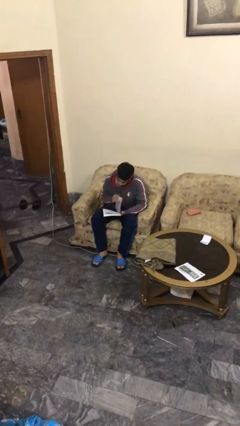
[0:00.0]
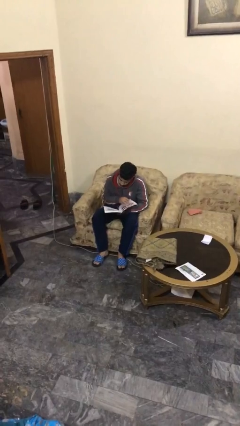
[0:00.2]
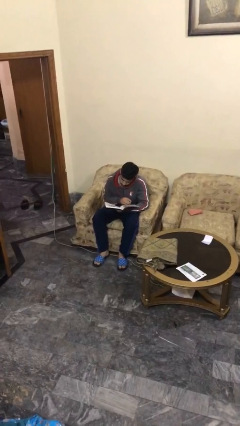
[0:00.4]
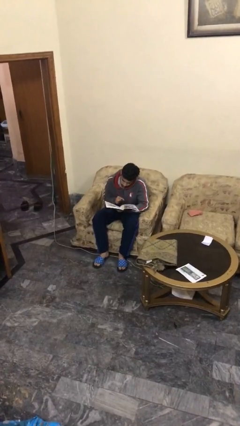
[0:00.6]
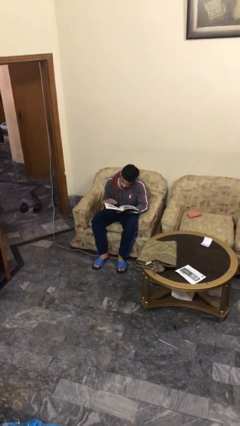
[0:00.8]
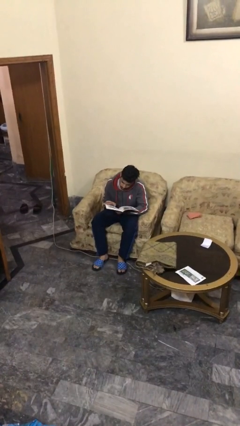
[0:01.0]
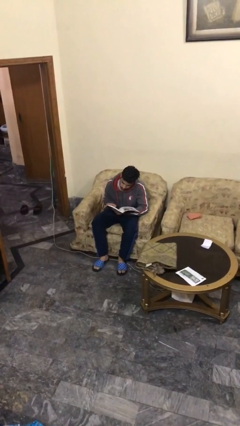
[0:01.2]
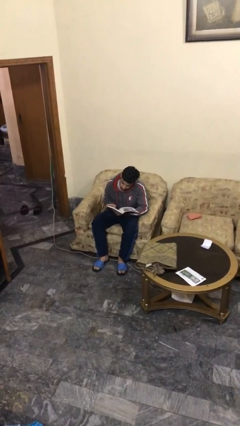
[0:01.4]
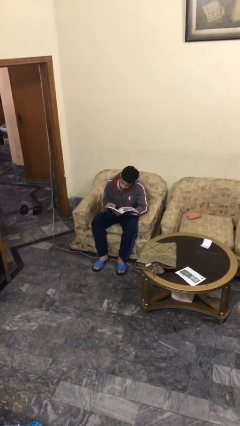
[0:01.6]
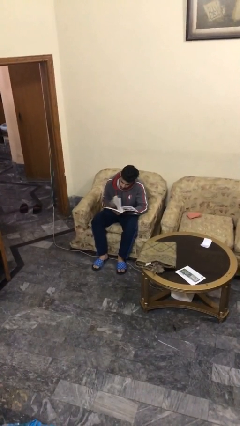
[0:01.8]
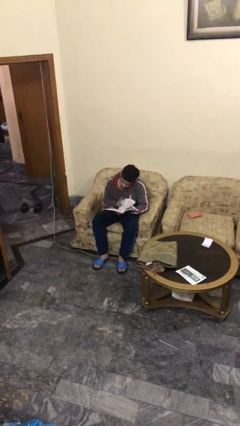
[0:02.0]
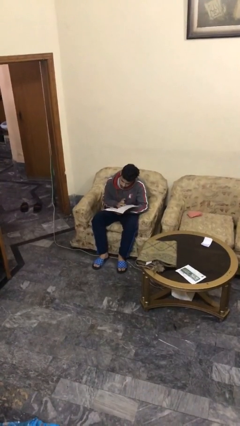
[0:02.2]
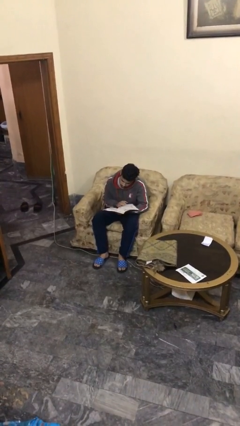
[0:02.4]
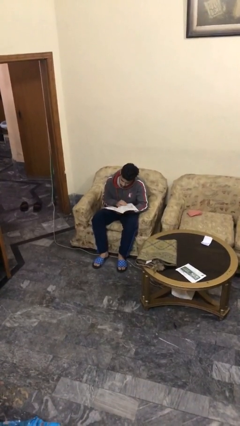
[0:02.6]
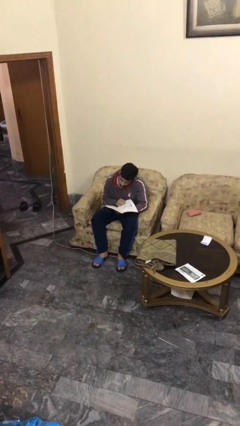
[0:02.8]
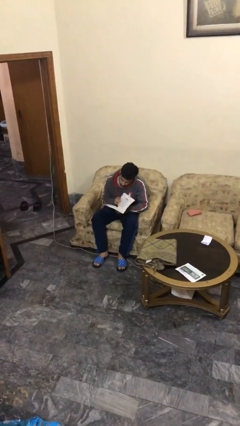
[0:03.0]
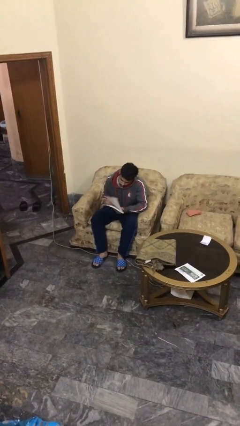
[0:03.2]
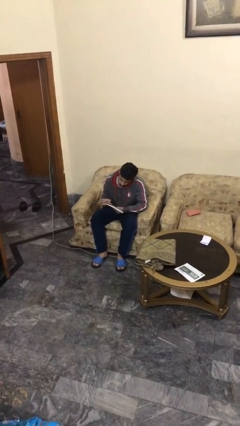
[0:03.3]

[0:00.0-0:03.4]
person reads document

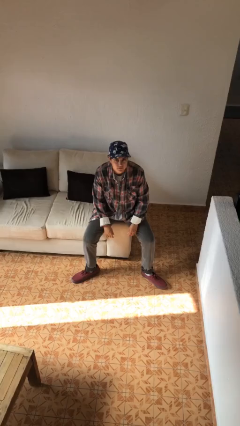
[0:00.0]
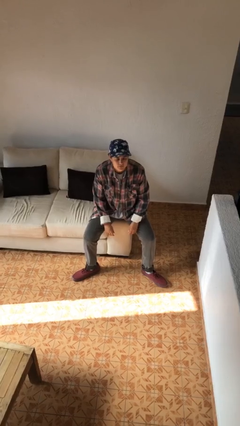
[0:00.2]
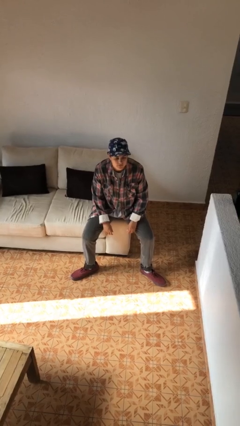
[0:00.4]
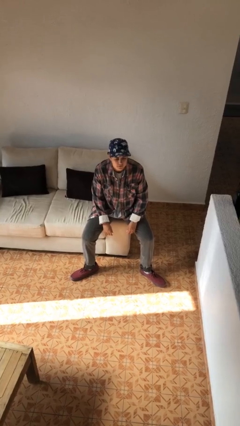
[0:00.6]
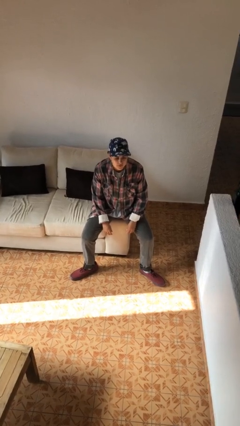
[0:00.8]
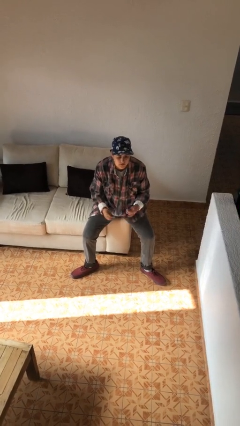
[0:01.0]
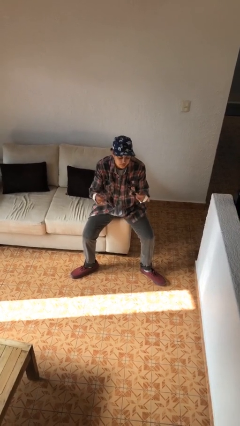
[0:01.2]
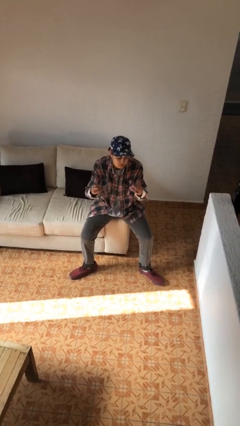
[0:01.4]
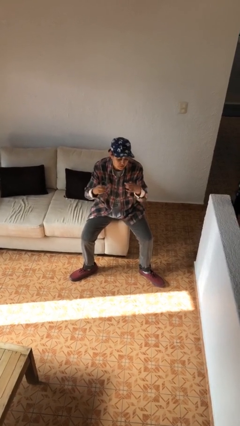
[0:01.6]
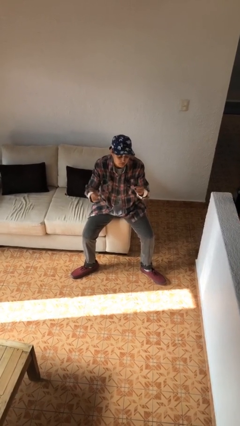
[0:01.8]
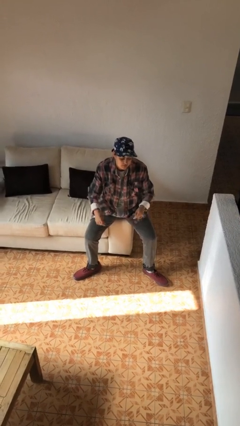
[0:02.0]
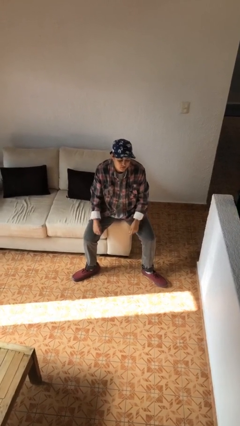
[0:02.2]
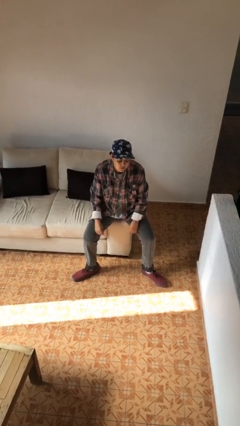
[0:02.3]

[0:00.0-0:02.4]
person snaps fingers

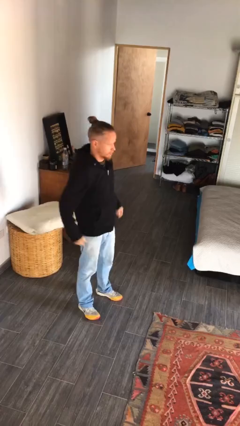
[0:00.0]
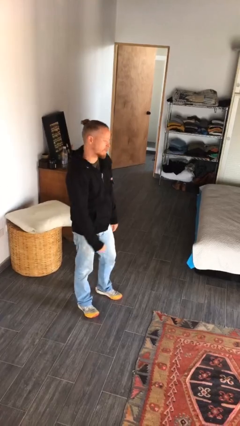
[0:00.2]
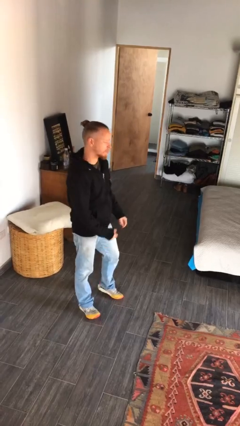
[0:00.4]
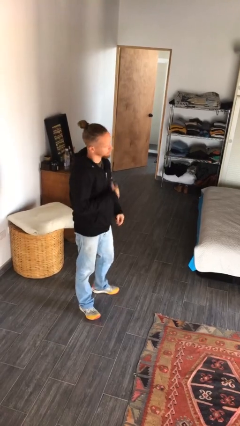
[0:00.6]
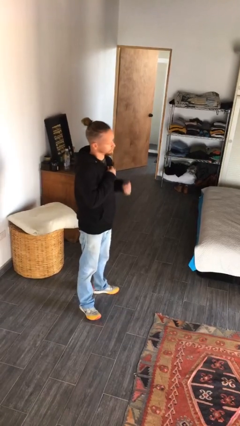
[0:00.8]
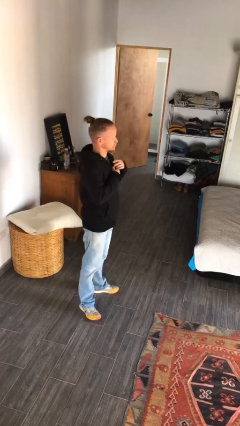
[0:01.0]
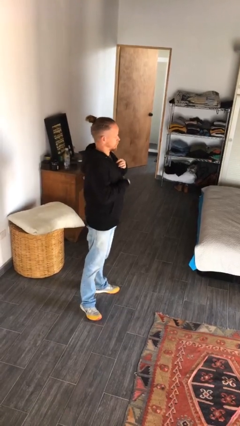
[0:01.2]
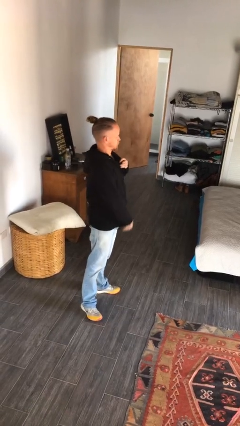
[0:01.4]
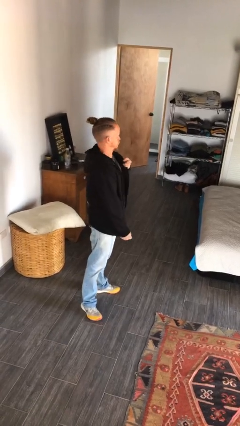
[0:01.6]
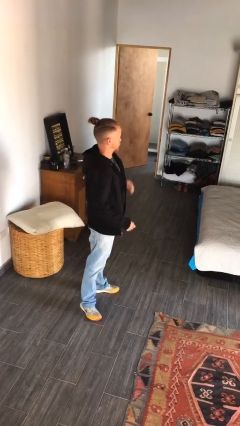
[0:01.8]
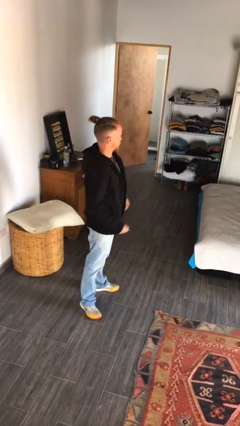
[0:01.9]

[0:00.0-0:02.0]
person unzips jacket

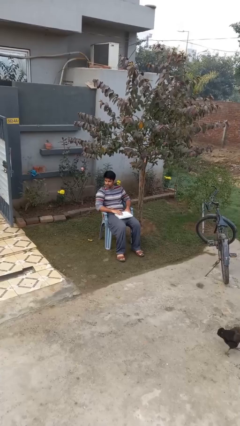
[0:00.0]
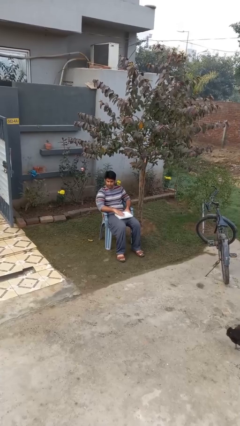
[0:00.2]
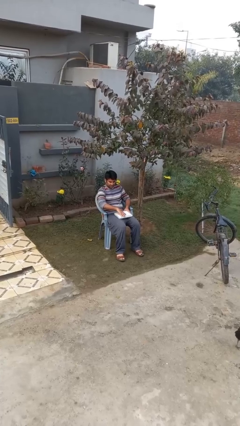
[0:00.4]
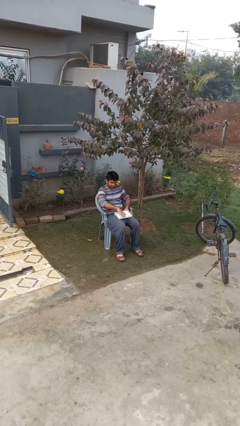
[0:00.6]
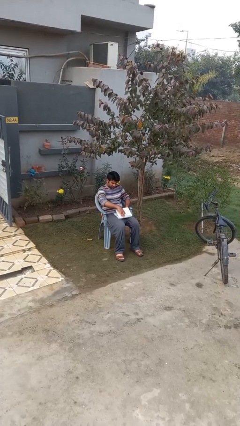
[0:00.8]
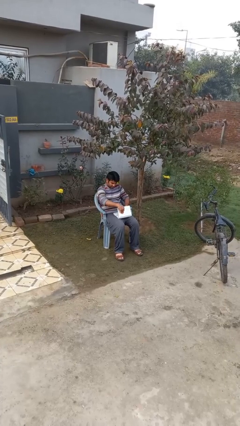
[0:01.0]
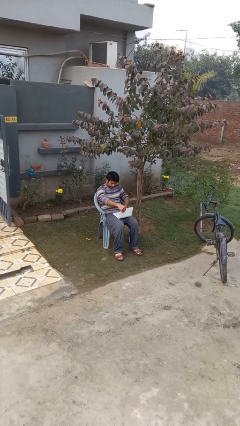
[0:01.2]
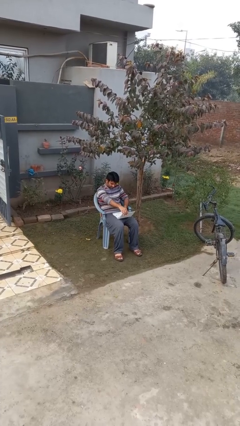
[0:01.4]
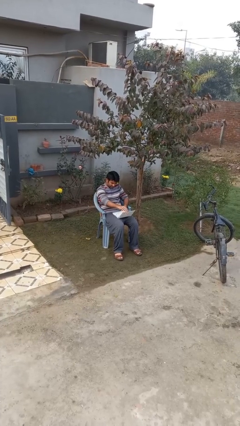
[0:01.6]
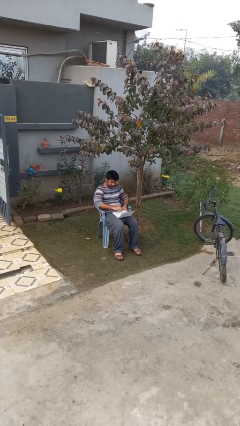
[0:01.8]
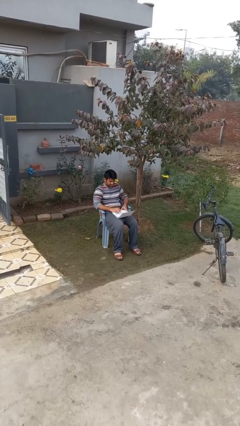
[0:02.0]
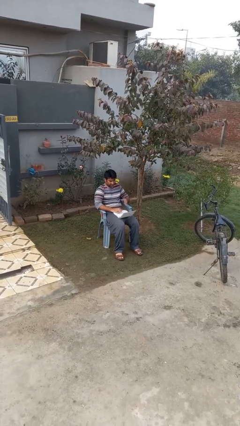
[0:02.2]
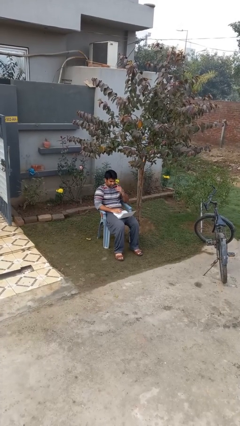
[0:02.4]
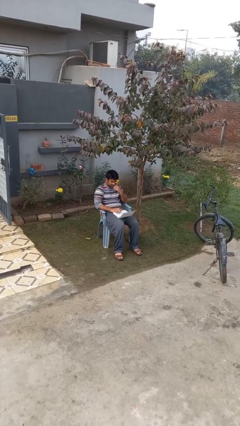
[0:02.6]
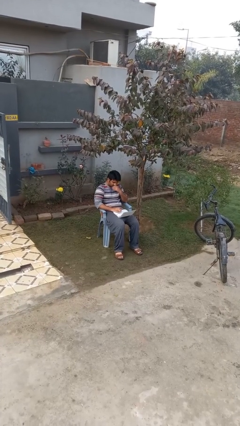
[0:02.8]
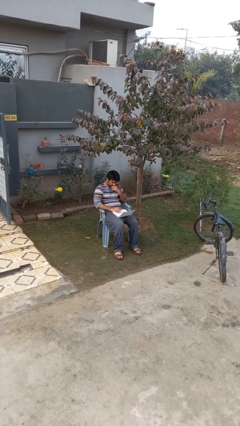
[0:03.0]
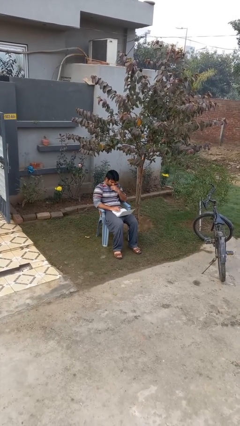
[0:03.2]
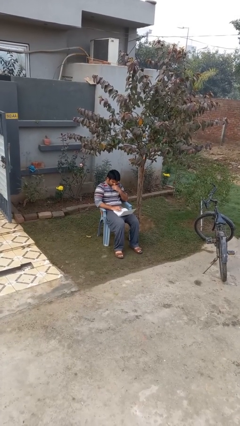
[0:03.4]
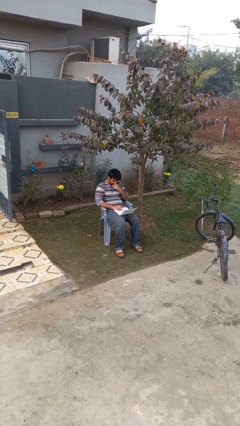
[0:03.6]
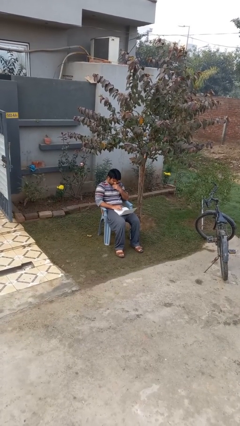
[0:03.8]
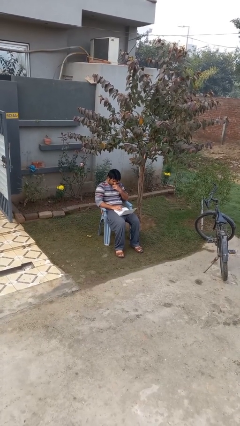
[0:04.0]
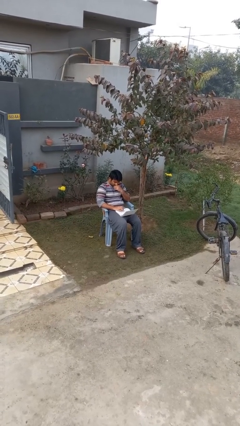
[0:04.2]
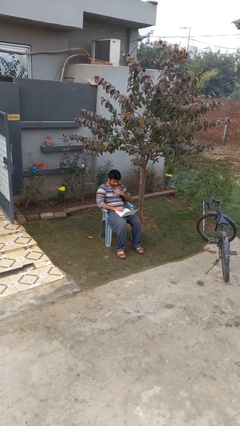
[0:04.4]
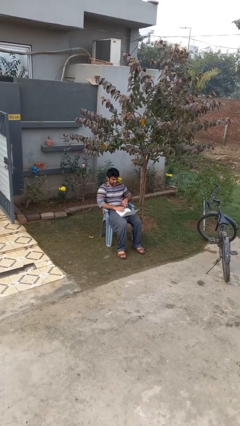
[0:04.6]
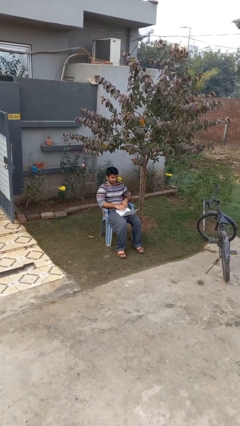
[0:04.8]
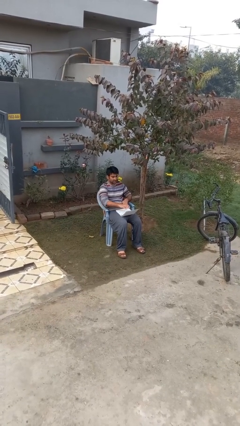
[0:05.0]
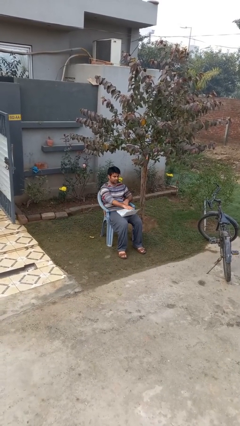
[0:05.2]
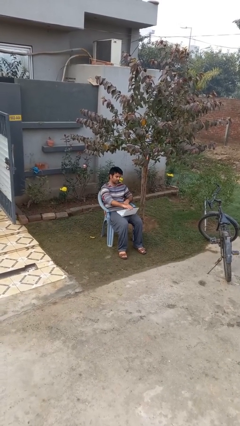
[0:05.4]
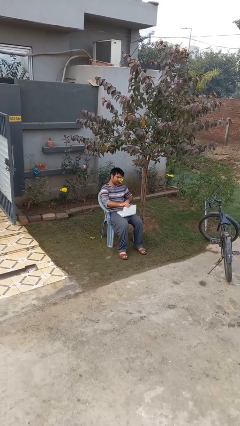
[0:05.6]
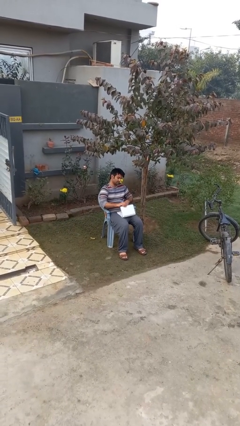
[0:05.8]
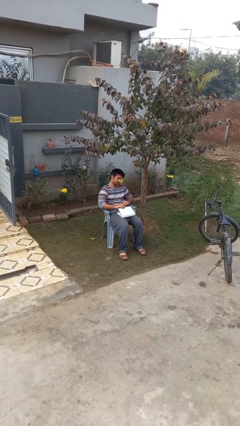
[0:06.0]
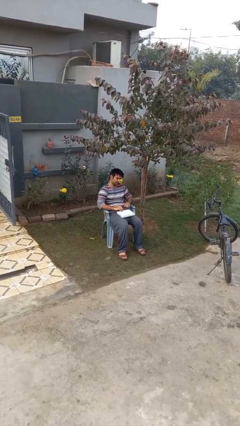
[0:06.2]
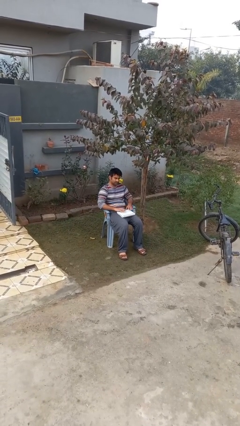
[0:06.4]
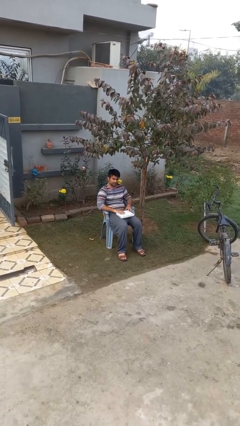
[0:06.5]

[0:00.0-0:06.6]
person interacts with laptop

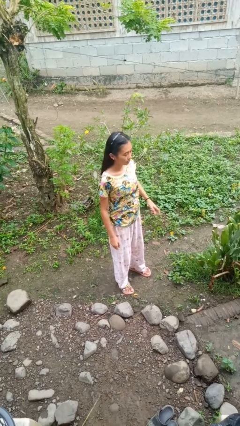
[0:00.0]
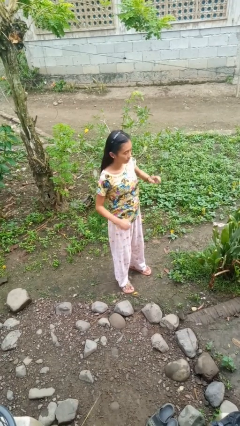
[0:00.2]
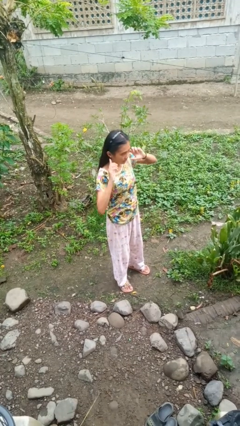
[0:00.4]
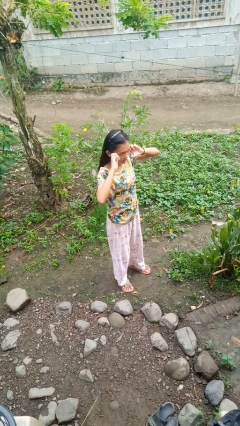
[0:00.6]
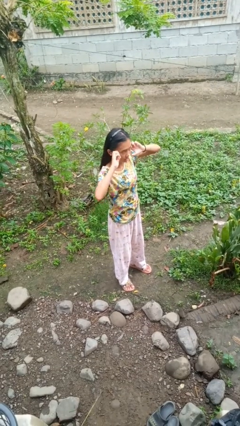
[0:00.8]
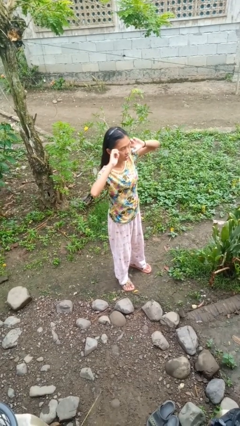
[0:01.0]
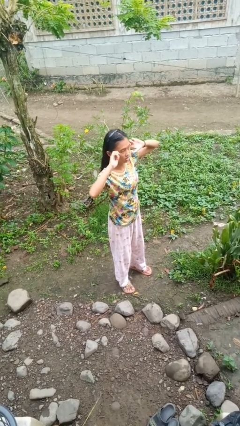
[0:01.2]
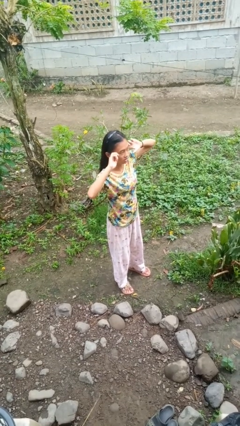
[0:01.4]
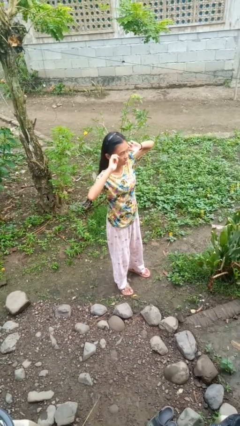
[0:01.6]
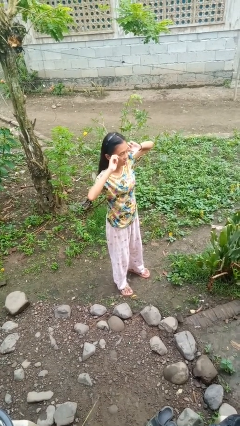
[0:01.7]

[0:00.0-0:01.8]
person puts fingers in ear

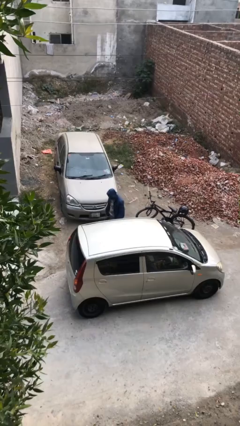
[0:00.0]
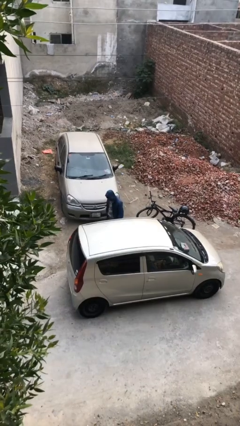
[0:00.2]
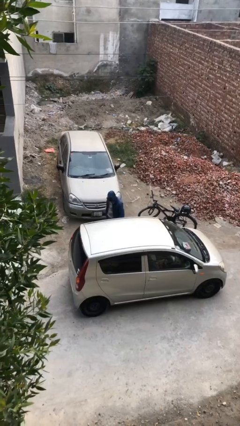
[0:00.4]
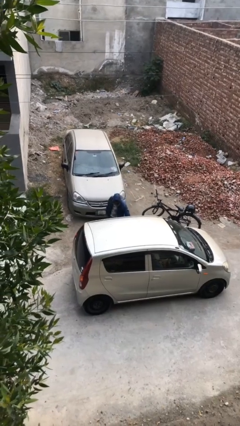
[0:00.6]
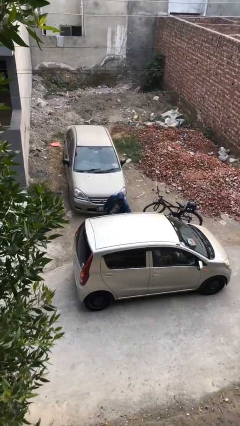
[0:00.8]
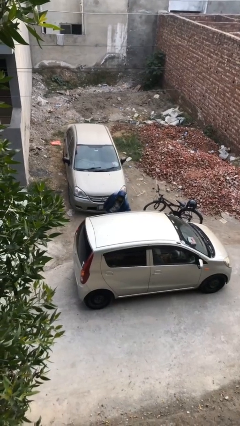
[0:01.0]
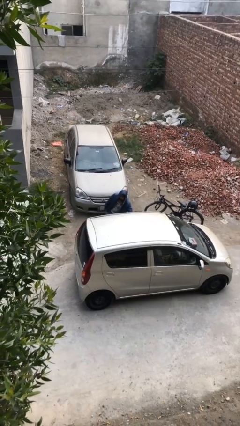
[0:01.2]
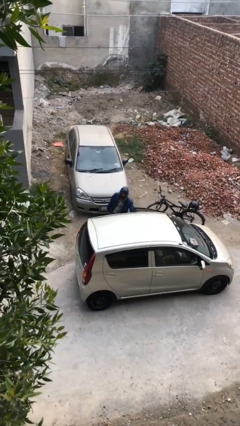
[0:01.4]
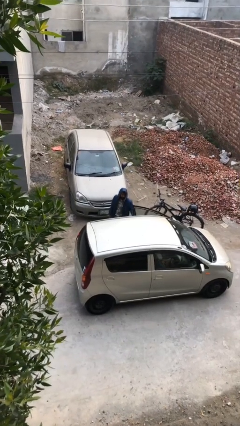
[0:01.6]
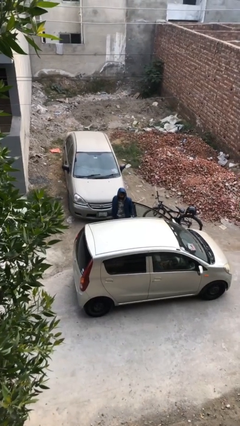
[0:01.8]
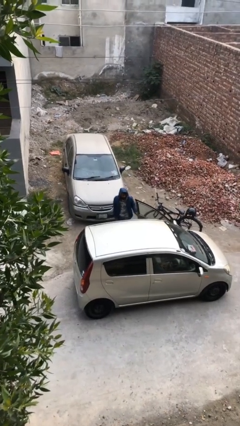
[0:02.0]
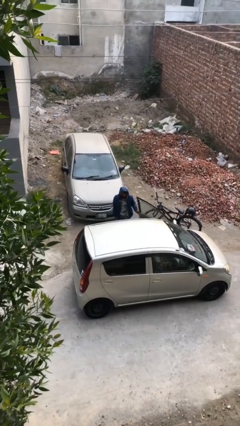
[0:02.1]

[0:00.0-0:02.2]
person opens car door
